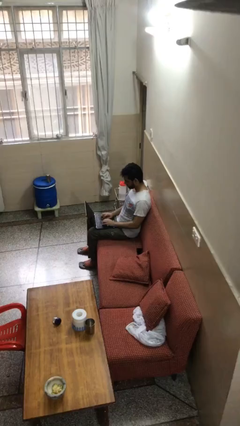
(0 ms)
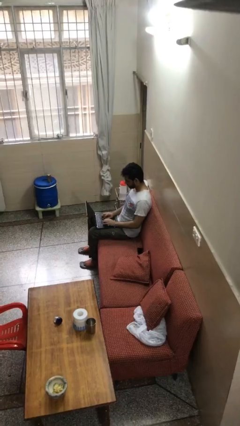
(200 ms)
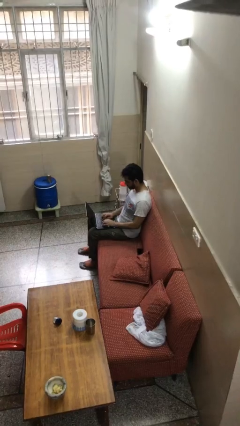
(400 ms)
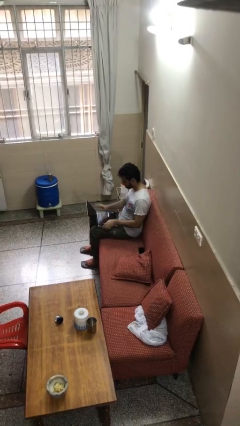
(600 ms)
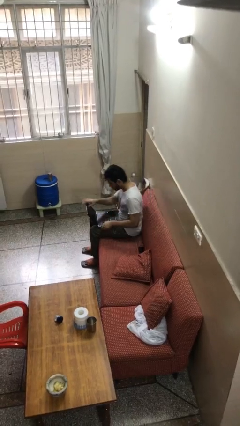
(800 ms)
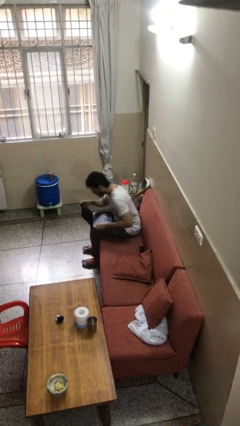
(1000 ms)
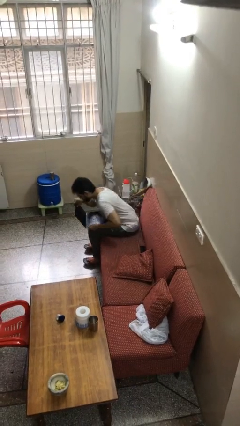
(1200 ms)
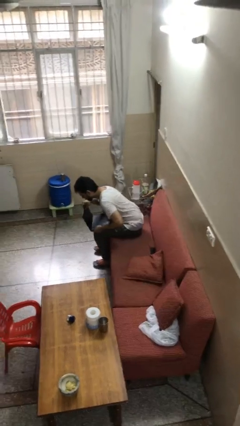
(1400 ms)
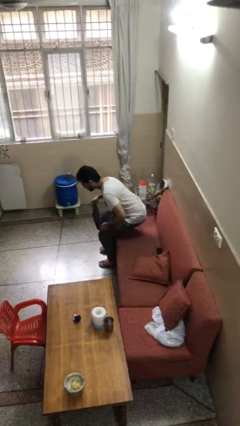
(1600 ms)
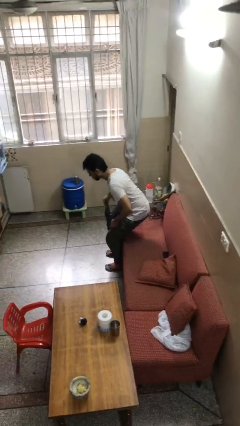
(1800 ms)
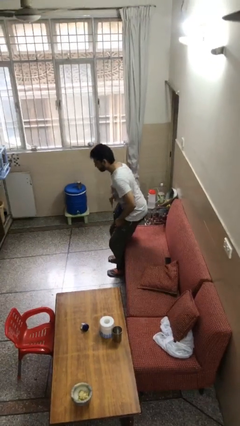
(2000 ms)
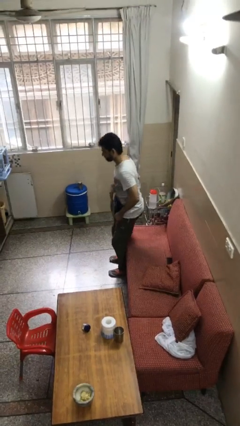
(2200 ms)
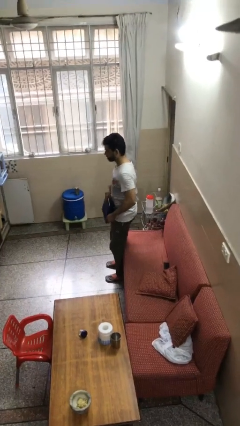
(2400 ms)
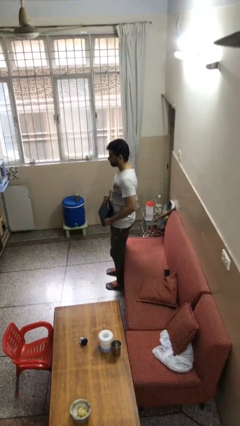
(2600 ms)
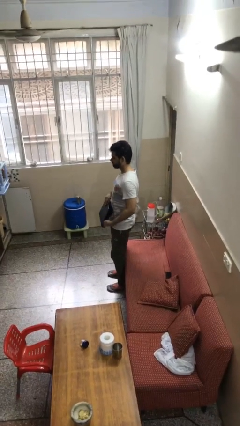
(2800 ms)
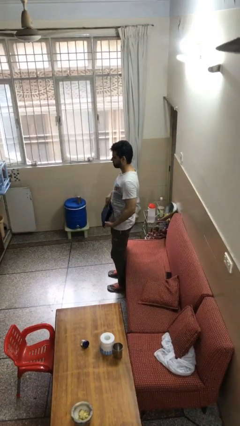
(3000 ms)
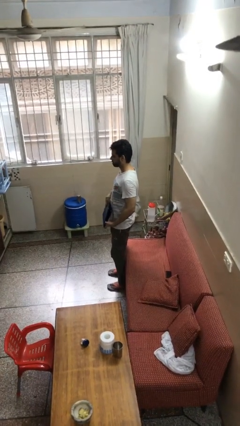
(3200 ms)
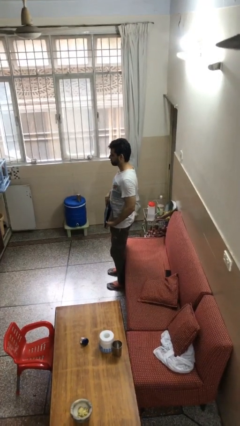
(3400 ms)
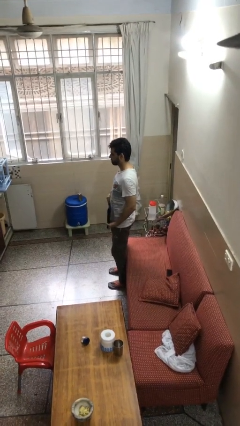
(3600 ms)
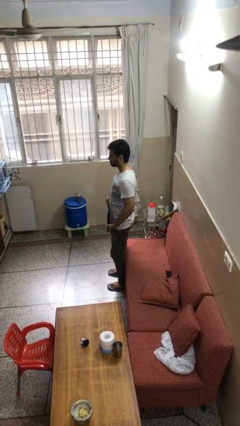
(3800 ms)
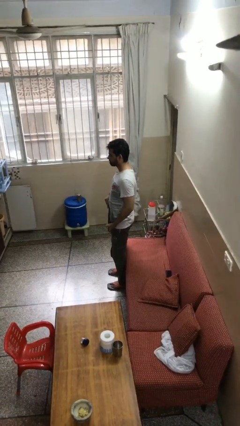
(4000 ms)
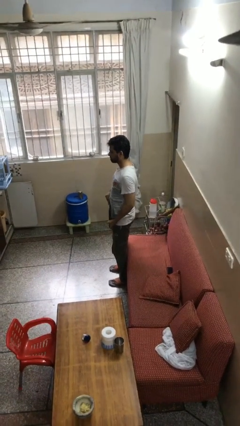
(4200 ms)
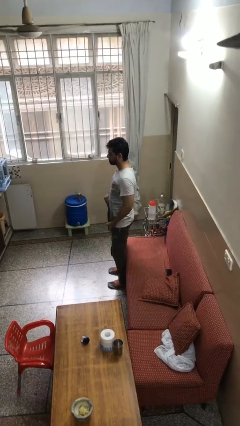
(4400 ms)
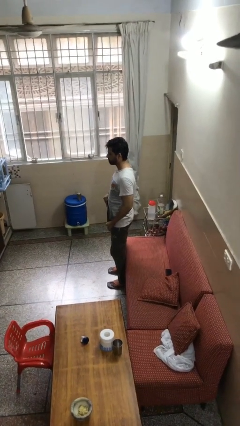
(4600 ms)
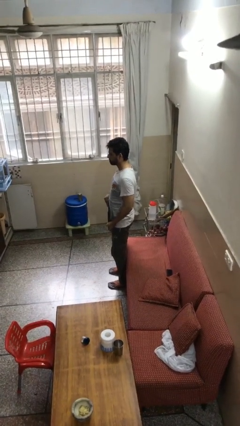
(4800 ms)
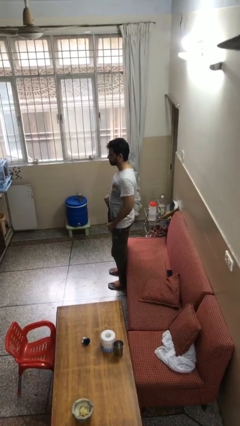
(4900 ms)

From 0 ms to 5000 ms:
person stands up

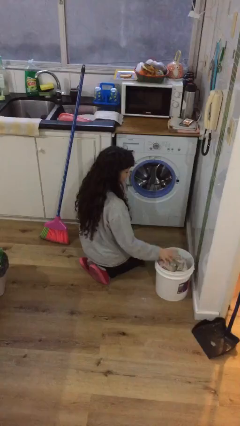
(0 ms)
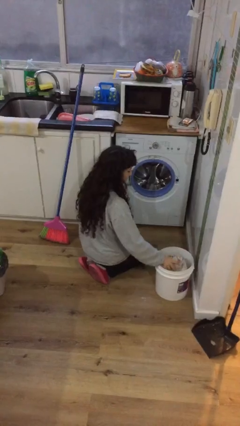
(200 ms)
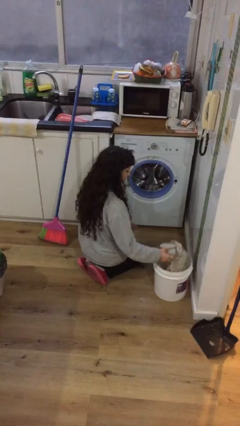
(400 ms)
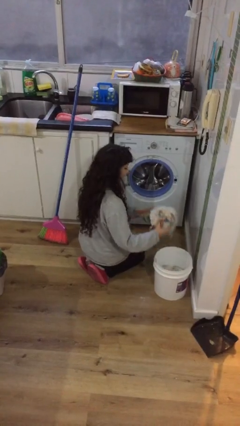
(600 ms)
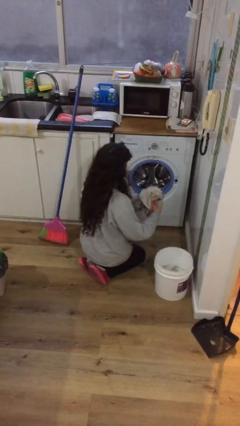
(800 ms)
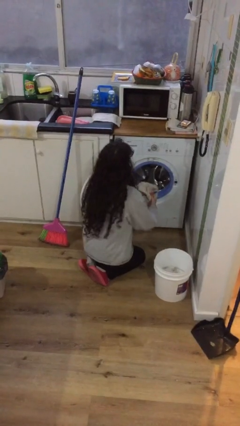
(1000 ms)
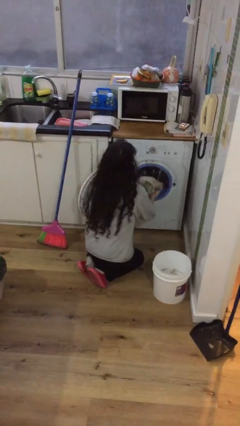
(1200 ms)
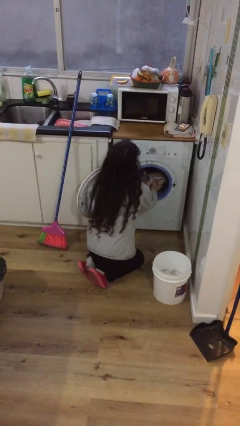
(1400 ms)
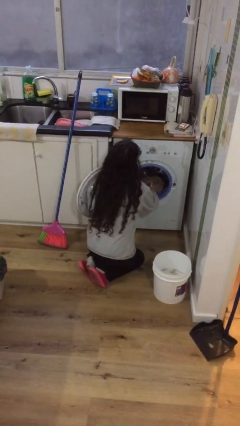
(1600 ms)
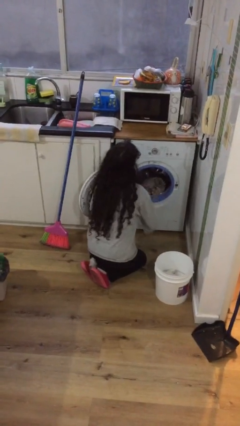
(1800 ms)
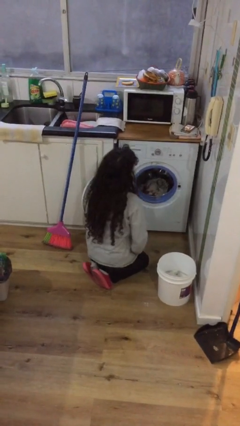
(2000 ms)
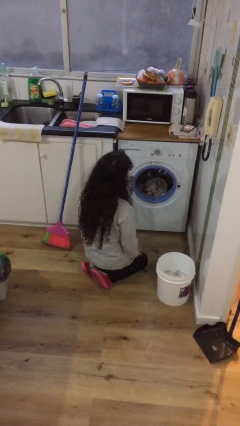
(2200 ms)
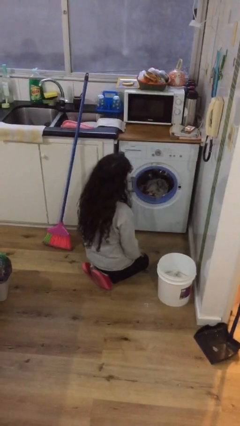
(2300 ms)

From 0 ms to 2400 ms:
person loads dryer

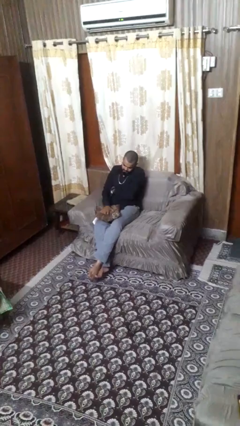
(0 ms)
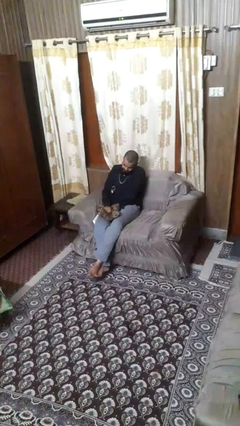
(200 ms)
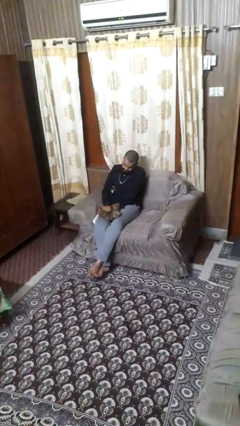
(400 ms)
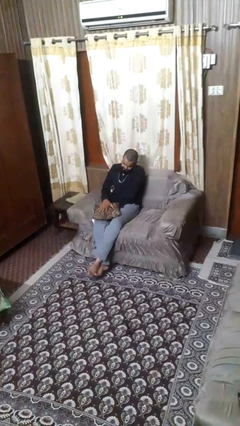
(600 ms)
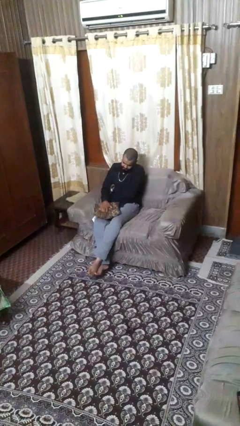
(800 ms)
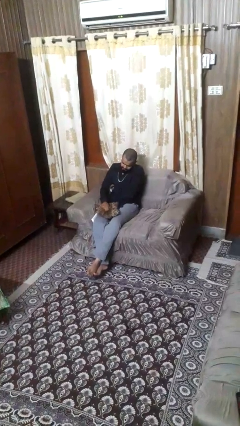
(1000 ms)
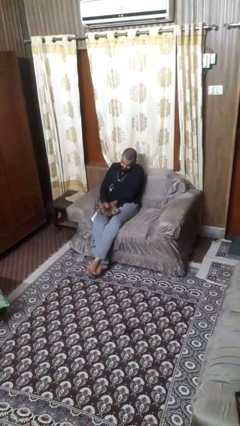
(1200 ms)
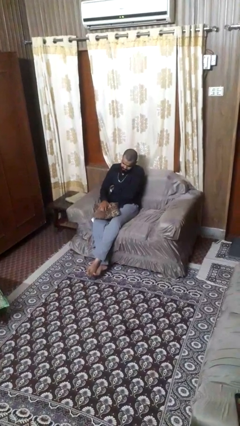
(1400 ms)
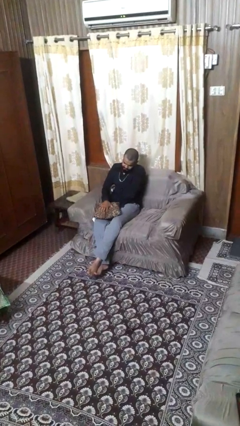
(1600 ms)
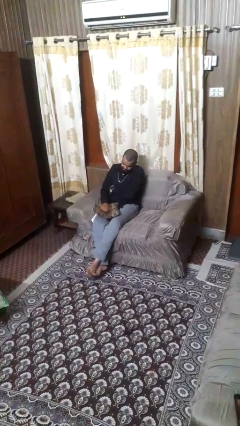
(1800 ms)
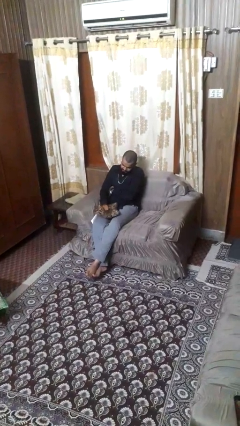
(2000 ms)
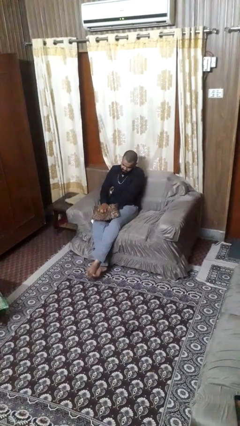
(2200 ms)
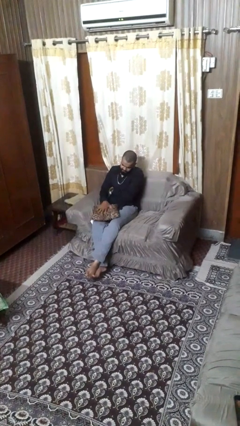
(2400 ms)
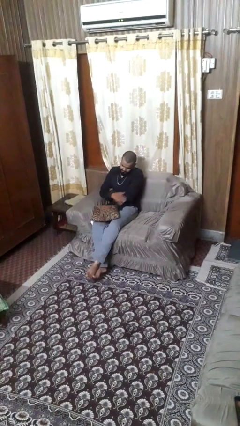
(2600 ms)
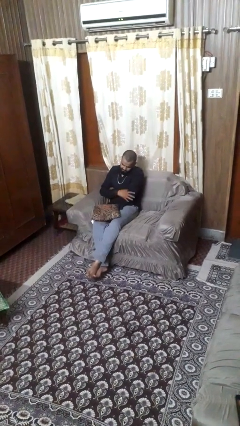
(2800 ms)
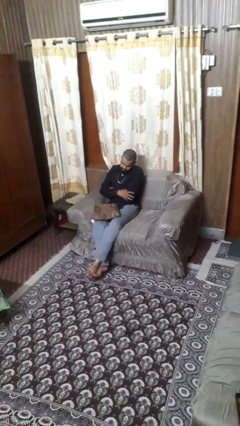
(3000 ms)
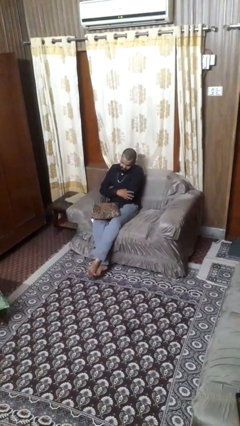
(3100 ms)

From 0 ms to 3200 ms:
person squeezes object

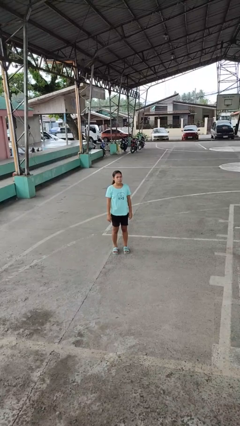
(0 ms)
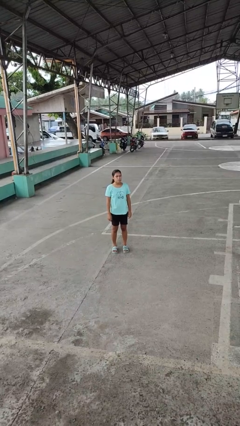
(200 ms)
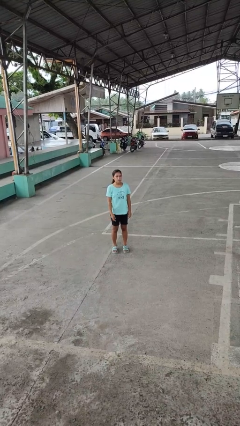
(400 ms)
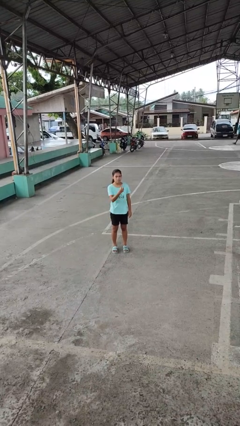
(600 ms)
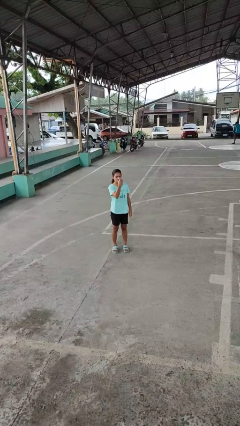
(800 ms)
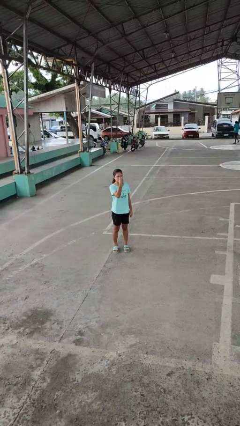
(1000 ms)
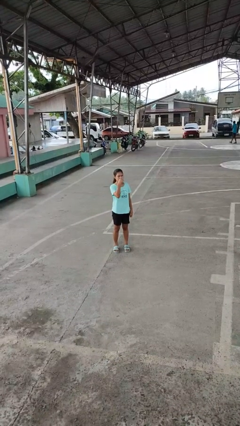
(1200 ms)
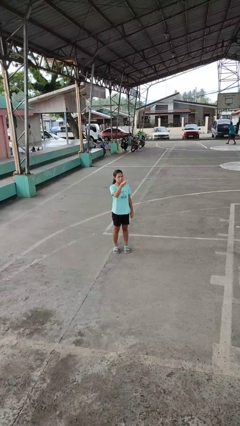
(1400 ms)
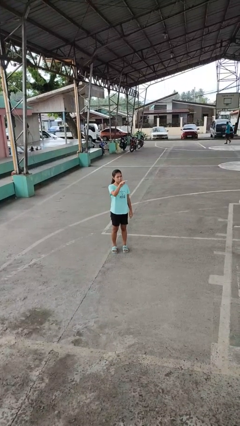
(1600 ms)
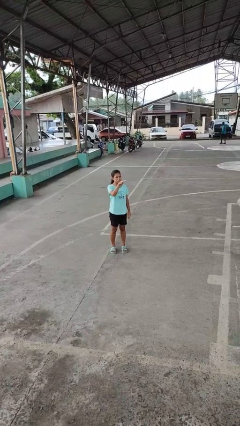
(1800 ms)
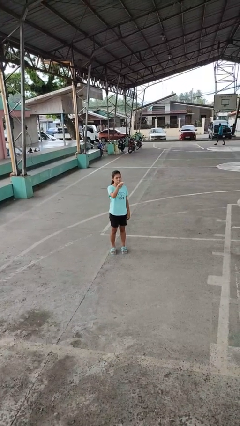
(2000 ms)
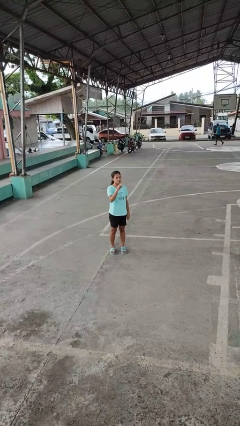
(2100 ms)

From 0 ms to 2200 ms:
person gestures watch closely

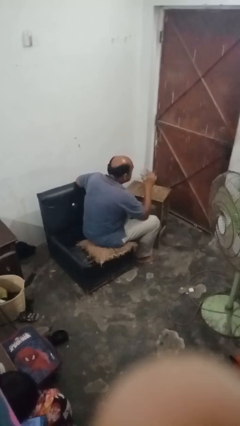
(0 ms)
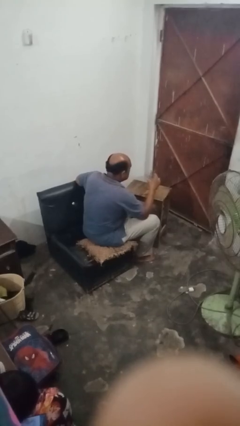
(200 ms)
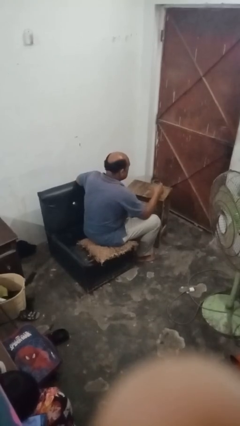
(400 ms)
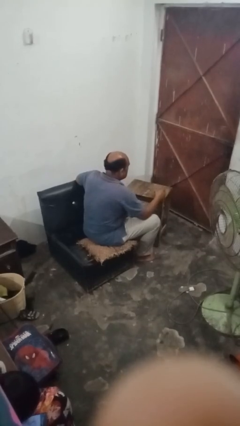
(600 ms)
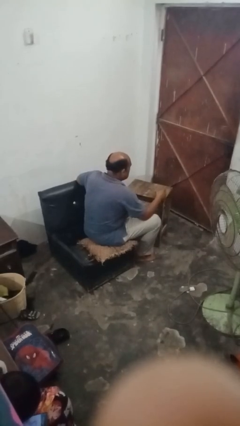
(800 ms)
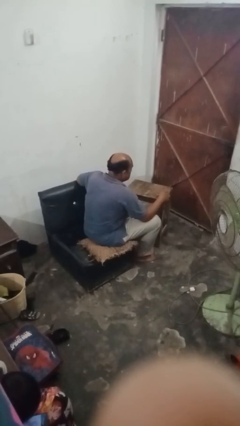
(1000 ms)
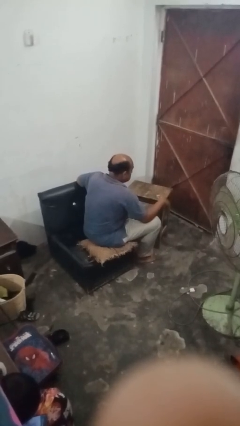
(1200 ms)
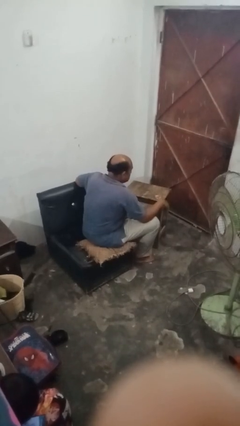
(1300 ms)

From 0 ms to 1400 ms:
person puts down object on table

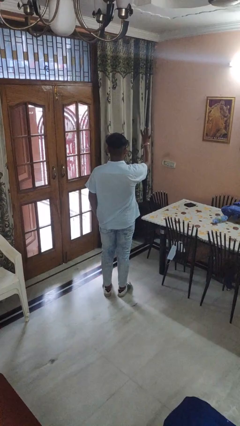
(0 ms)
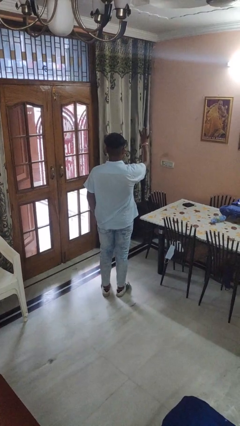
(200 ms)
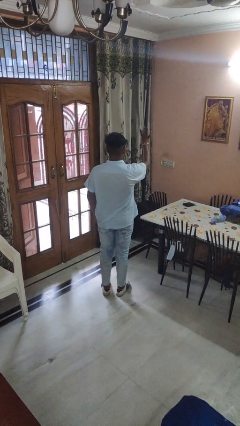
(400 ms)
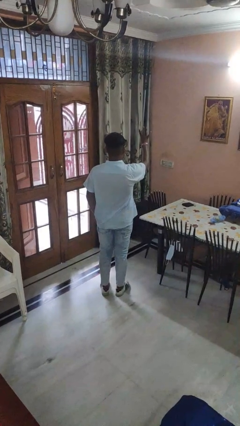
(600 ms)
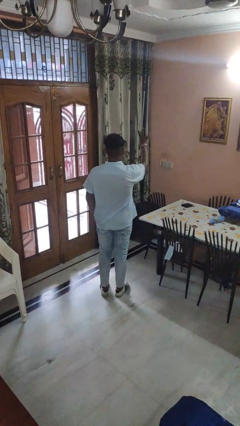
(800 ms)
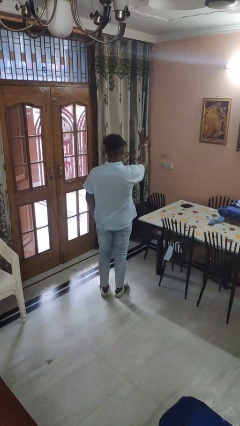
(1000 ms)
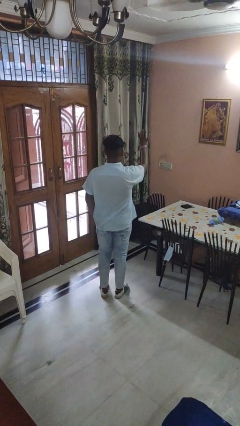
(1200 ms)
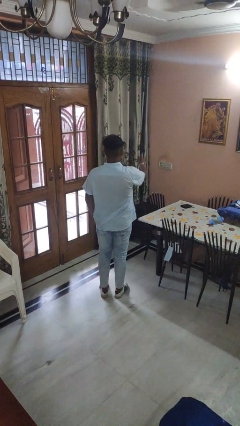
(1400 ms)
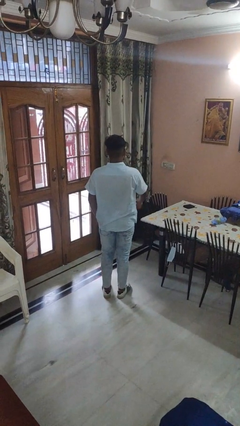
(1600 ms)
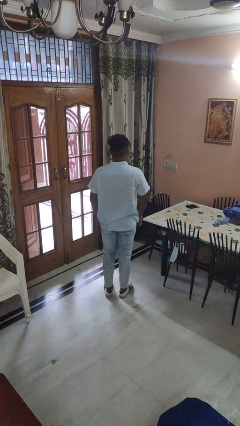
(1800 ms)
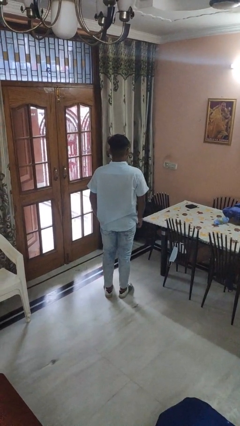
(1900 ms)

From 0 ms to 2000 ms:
person gestures number four

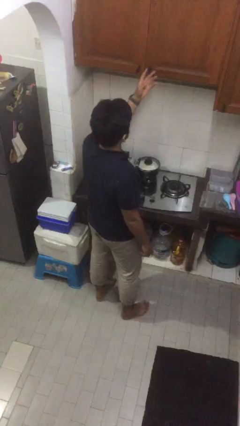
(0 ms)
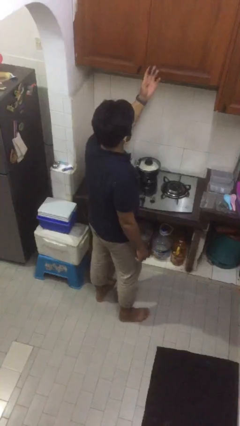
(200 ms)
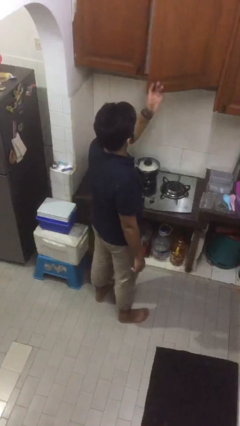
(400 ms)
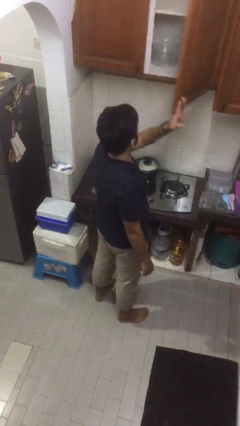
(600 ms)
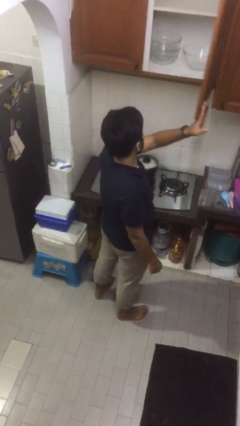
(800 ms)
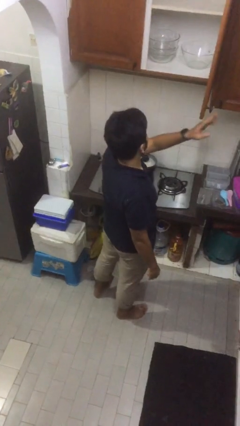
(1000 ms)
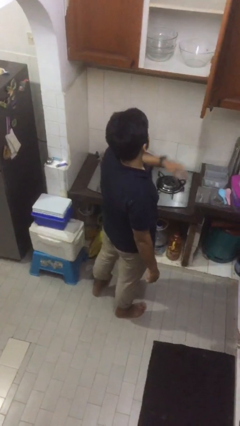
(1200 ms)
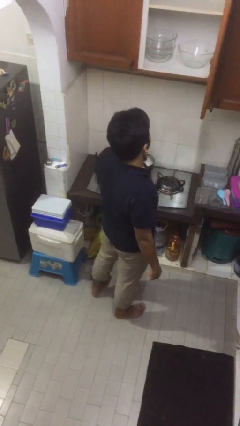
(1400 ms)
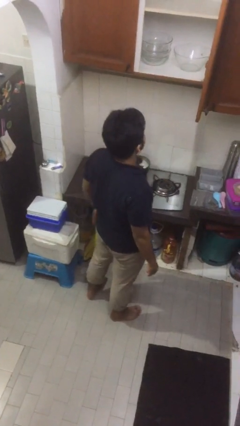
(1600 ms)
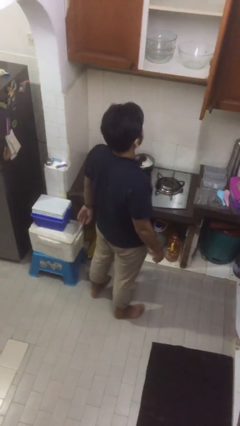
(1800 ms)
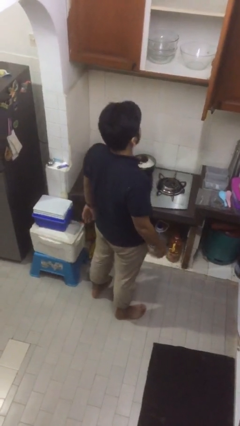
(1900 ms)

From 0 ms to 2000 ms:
person opens cabinet
